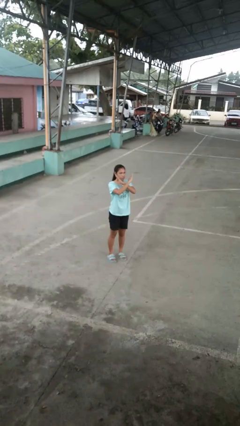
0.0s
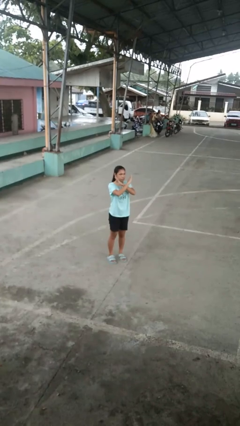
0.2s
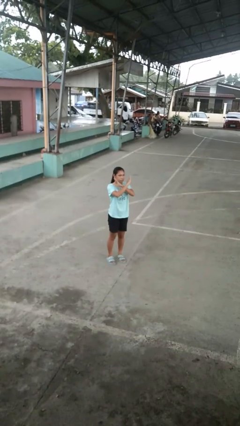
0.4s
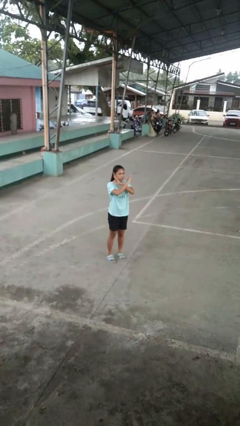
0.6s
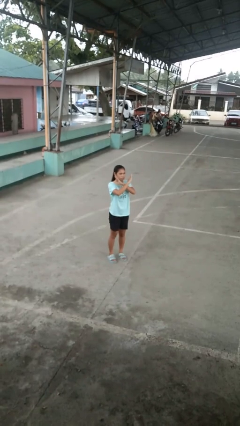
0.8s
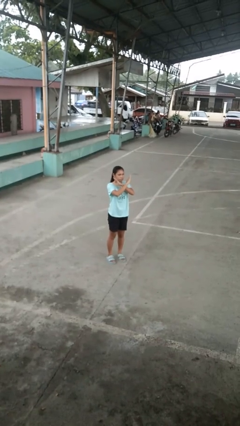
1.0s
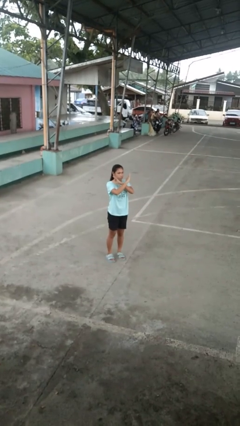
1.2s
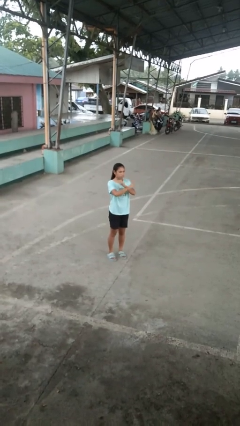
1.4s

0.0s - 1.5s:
person gestures arms x

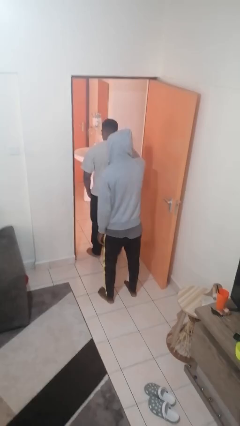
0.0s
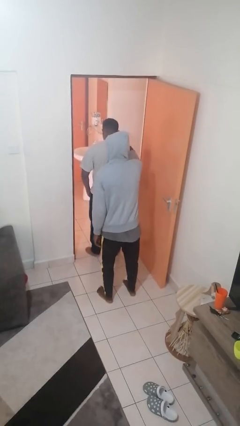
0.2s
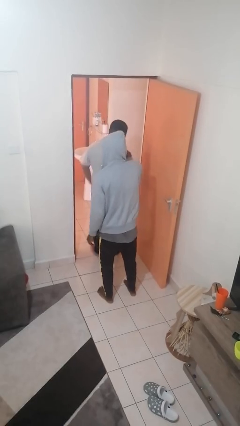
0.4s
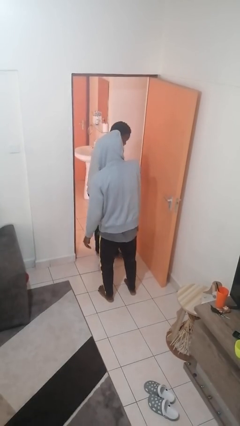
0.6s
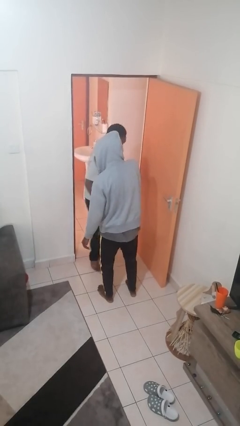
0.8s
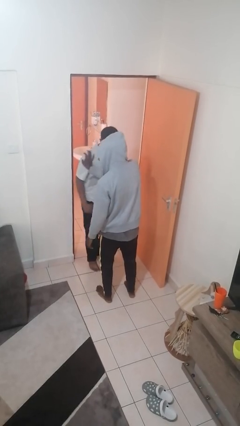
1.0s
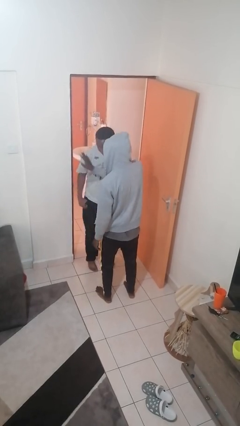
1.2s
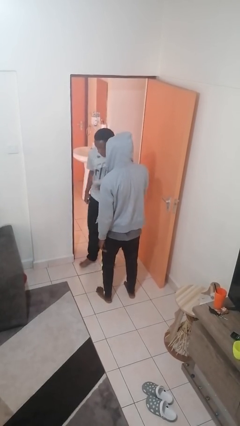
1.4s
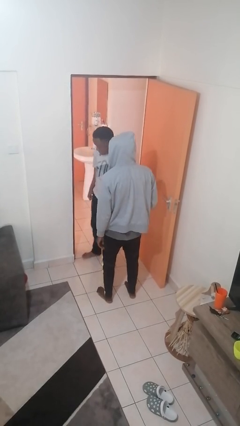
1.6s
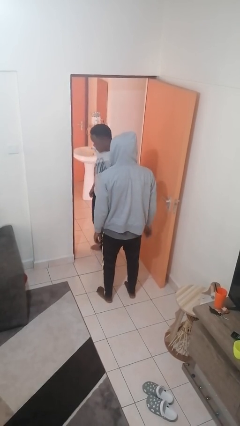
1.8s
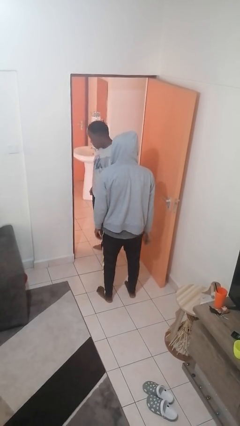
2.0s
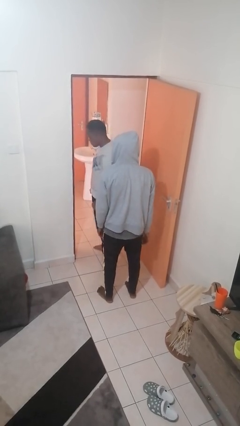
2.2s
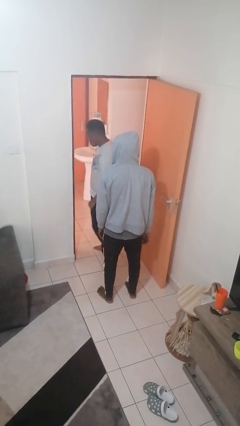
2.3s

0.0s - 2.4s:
person spins person around

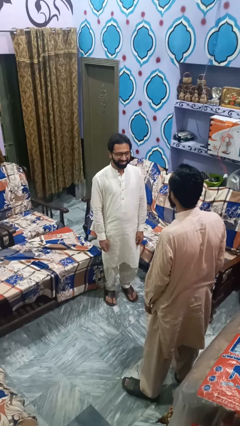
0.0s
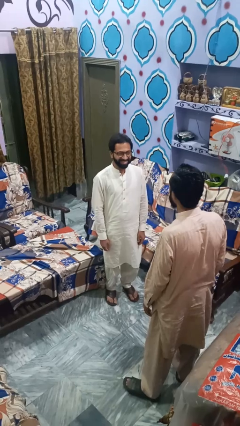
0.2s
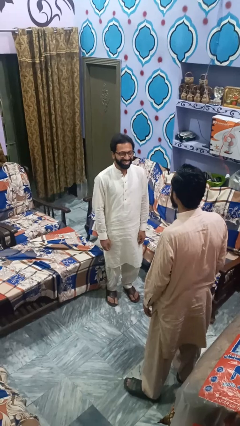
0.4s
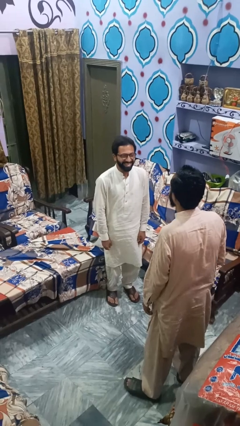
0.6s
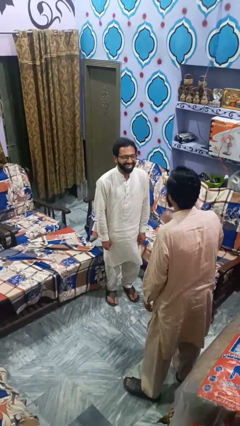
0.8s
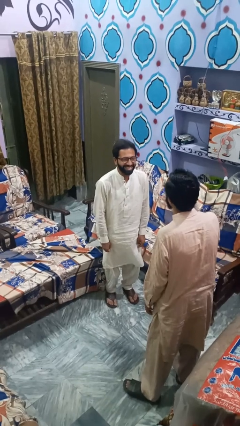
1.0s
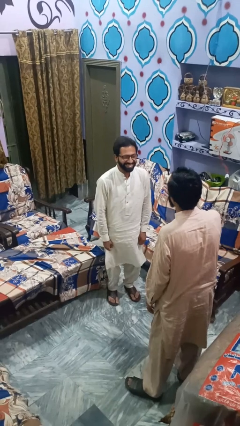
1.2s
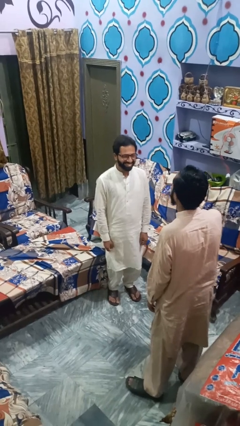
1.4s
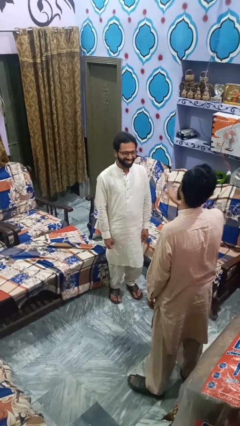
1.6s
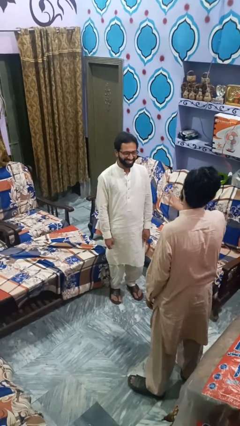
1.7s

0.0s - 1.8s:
person laughs with person

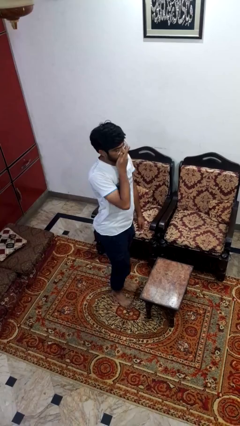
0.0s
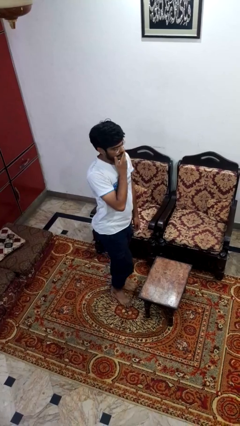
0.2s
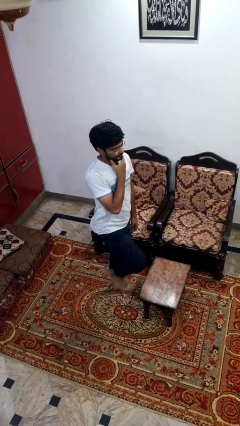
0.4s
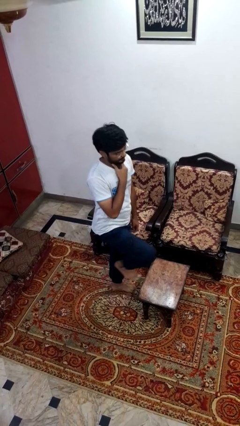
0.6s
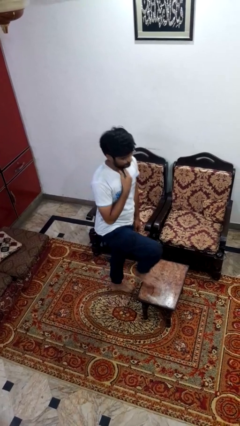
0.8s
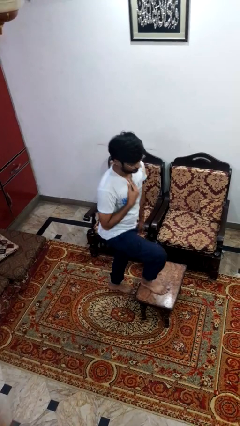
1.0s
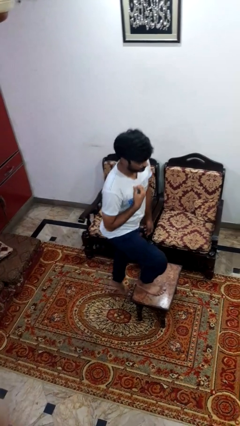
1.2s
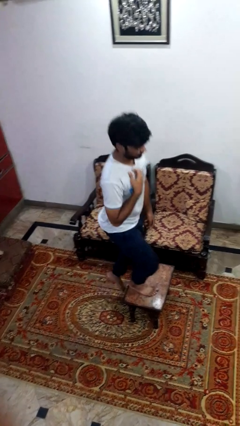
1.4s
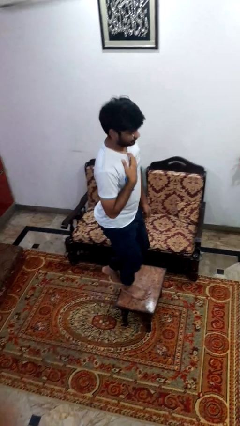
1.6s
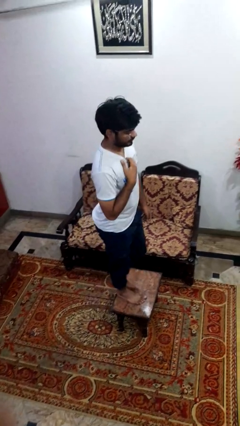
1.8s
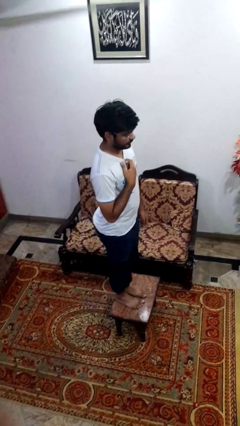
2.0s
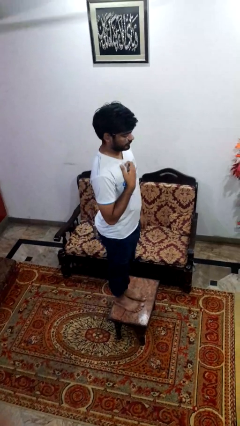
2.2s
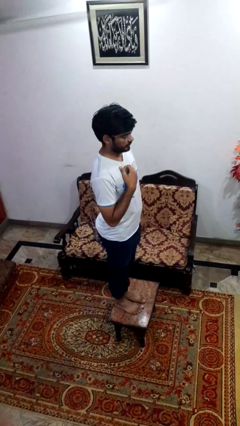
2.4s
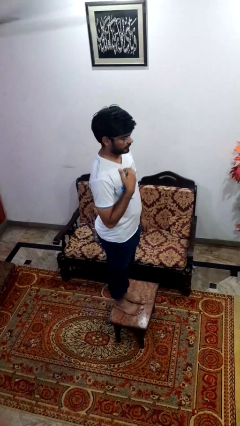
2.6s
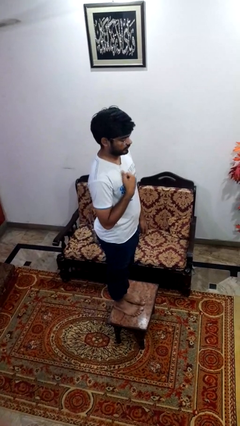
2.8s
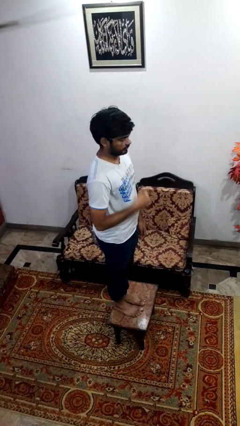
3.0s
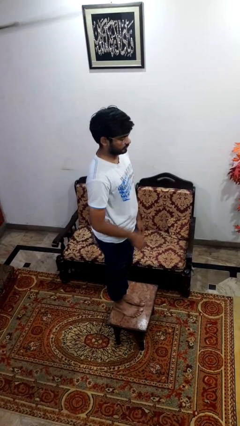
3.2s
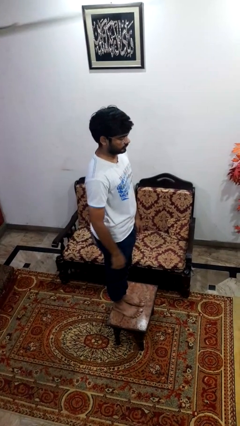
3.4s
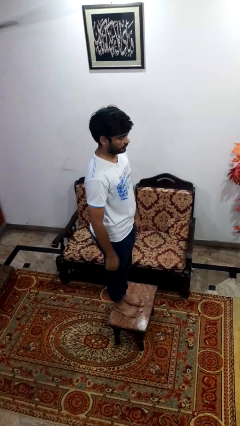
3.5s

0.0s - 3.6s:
person climbs on table

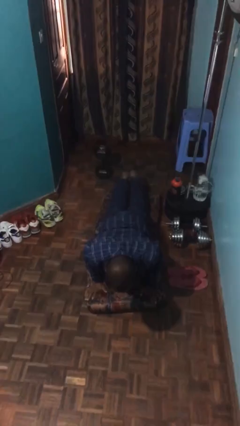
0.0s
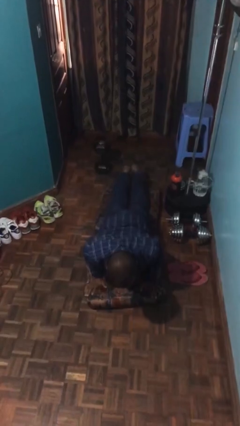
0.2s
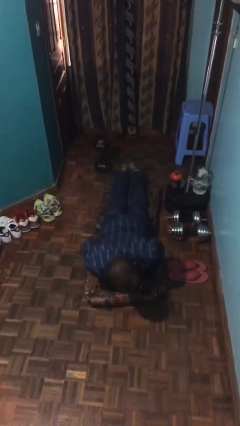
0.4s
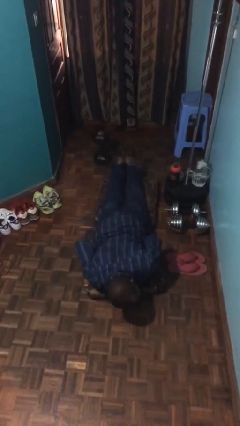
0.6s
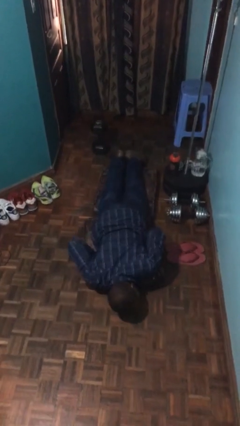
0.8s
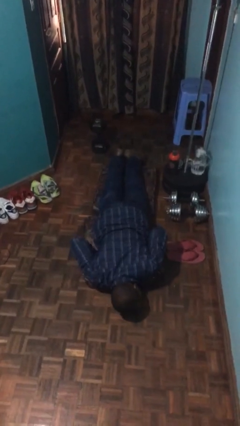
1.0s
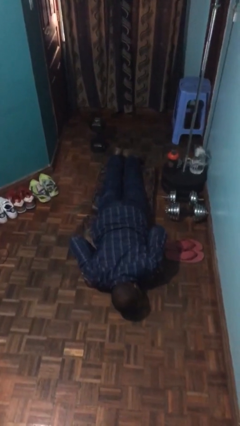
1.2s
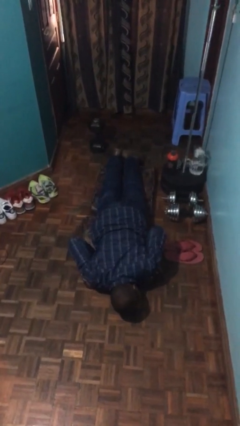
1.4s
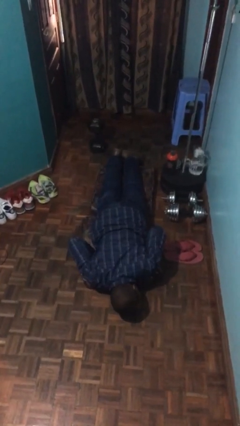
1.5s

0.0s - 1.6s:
person lies down on floor

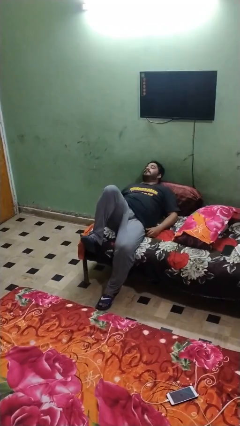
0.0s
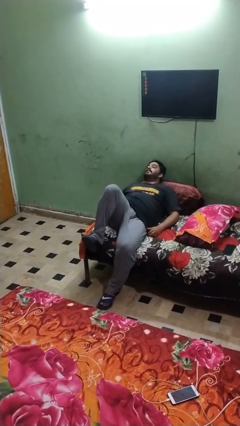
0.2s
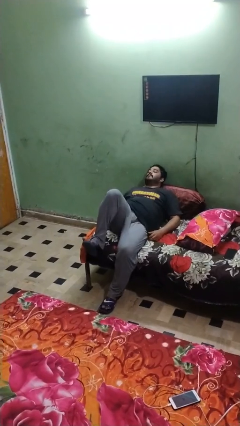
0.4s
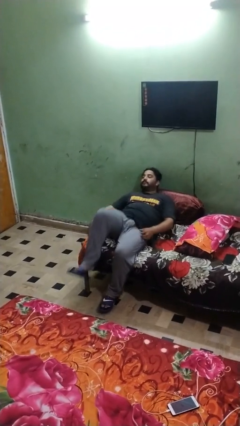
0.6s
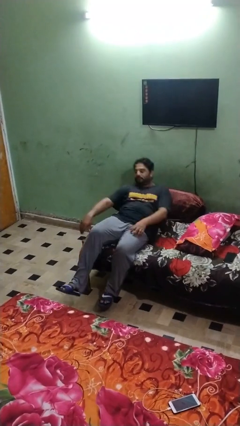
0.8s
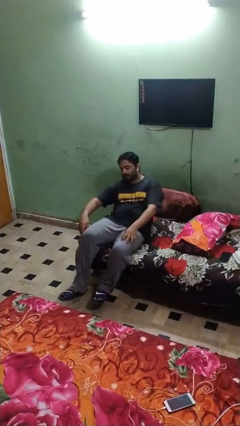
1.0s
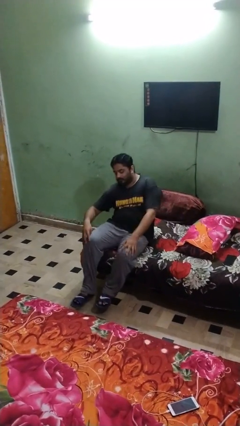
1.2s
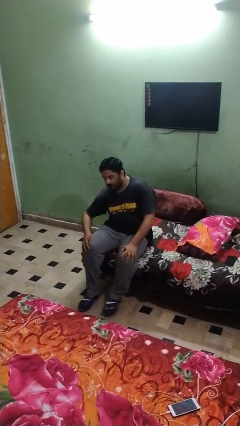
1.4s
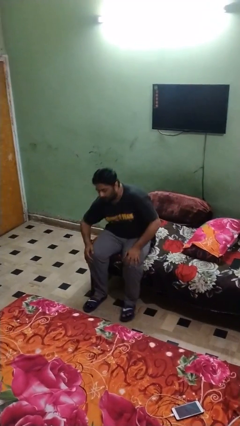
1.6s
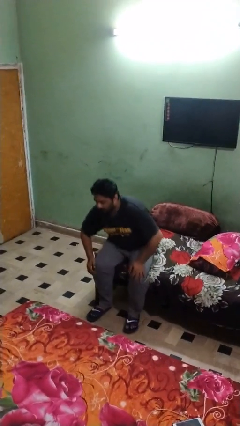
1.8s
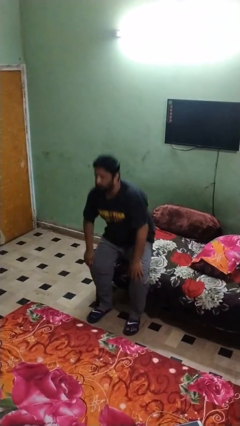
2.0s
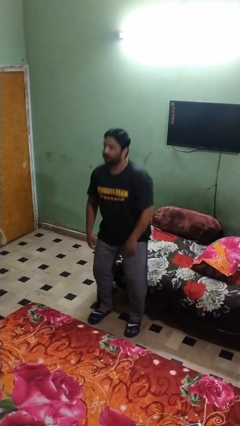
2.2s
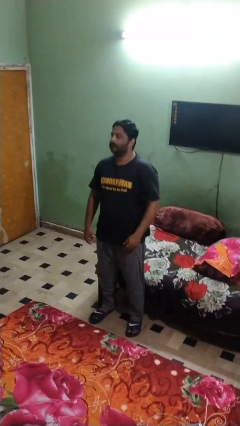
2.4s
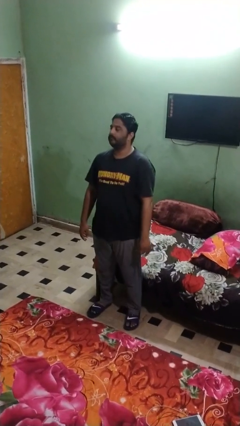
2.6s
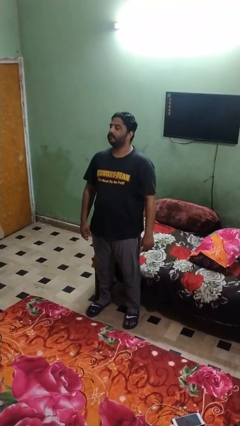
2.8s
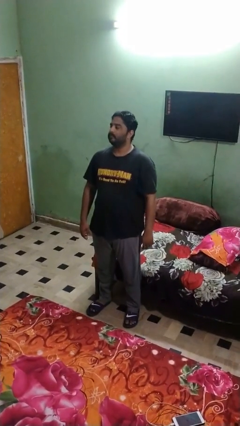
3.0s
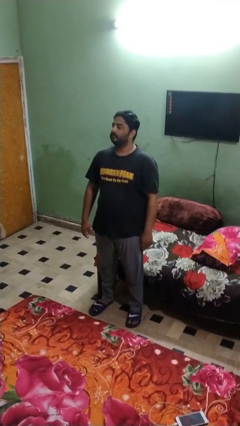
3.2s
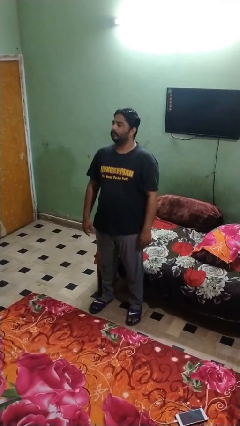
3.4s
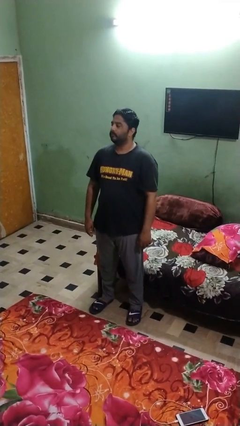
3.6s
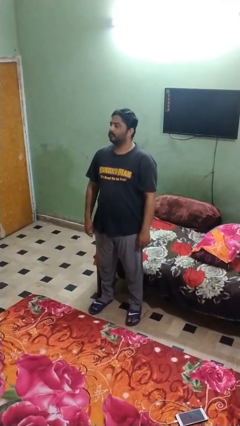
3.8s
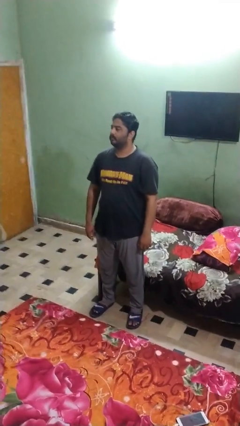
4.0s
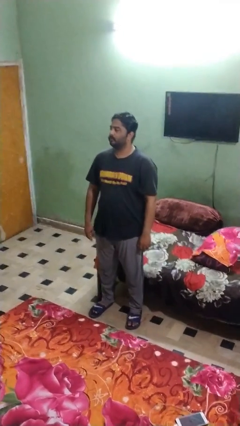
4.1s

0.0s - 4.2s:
person stands up

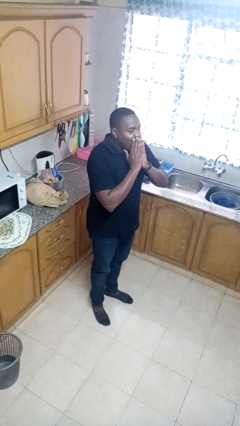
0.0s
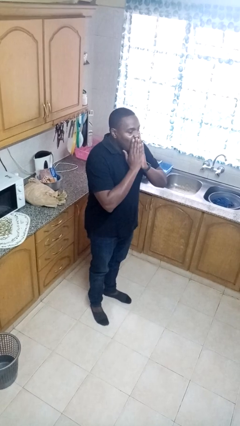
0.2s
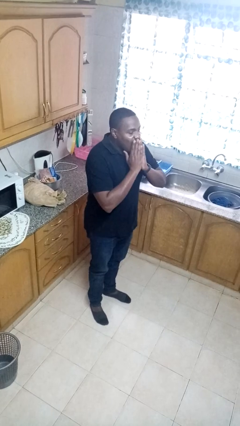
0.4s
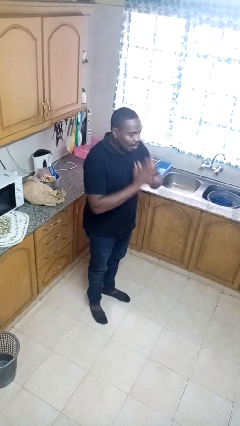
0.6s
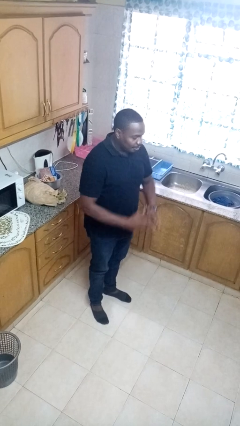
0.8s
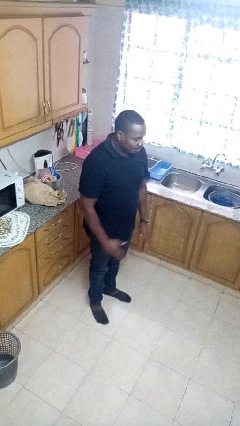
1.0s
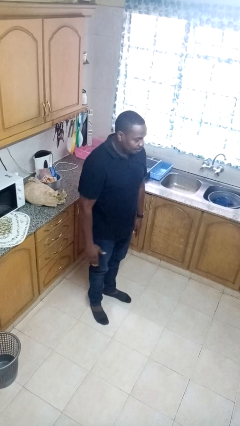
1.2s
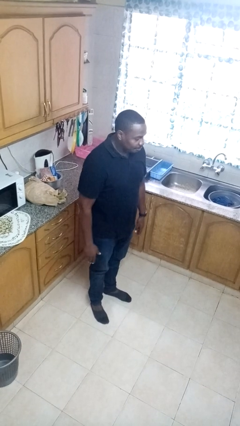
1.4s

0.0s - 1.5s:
person yawns

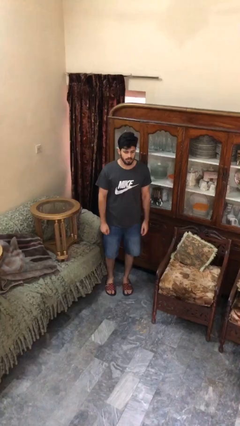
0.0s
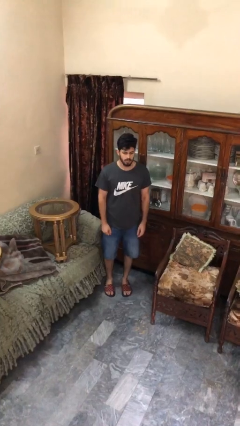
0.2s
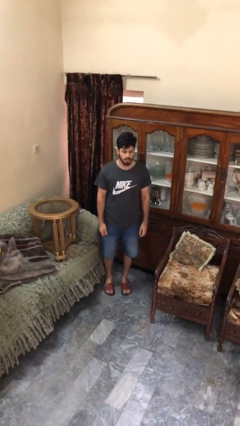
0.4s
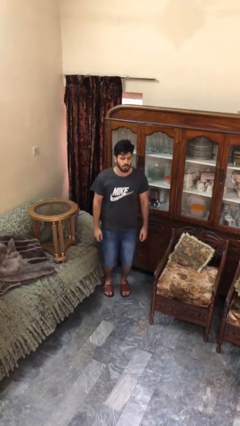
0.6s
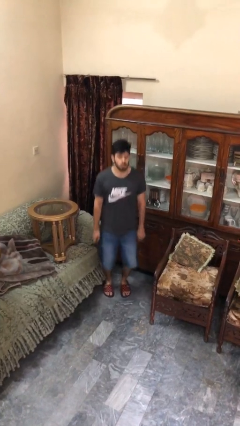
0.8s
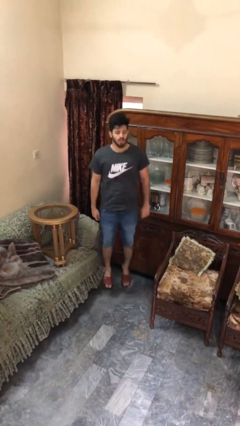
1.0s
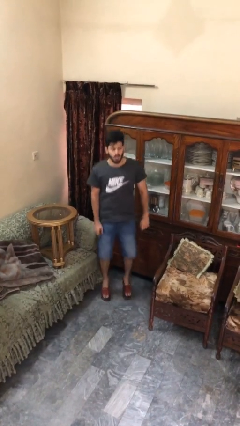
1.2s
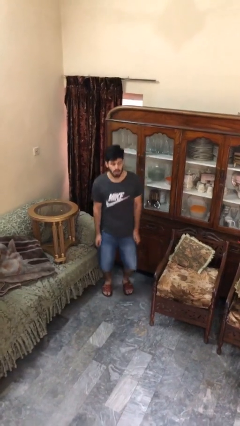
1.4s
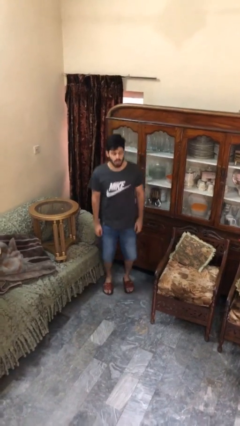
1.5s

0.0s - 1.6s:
person jumps
